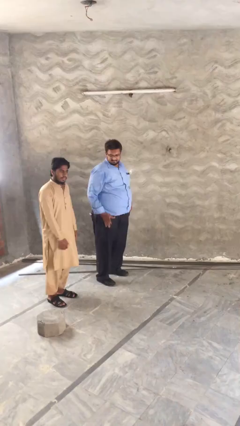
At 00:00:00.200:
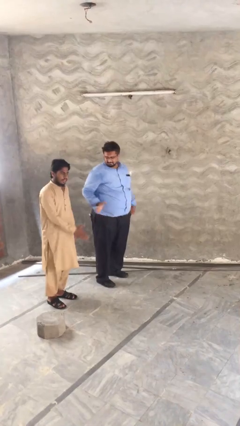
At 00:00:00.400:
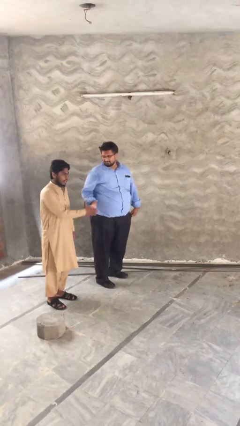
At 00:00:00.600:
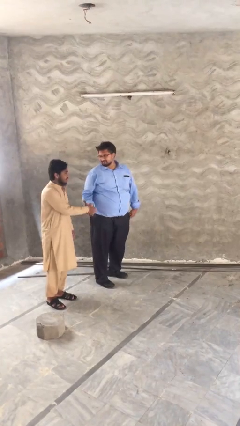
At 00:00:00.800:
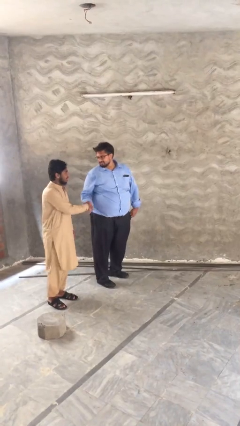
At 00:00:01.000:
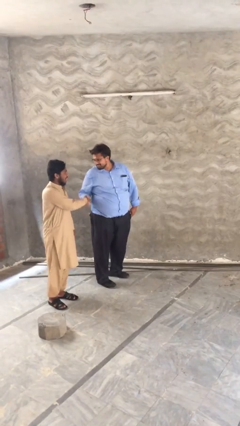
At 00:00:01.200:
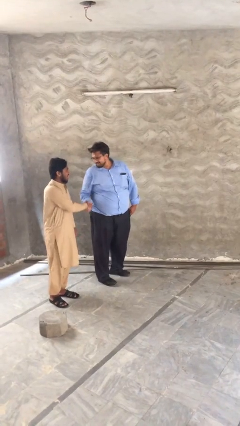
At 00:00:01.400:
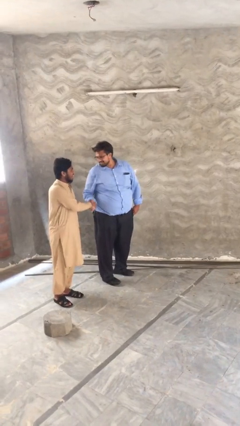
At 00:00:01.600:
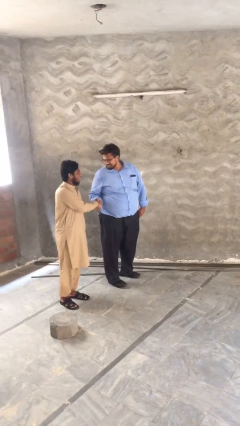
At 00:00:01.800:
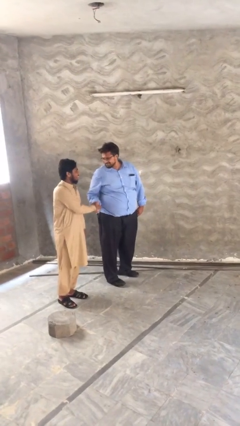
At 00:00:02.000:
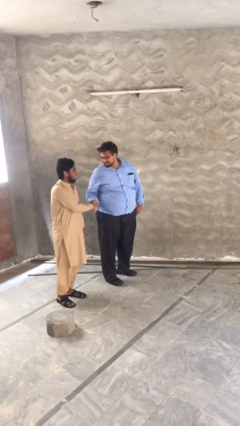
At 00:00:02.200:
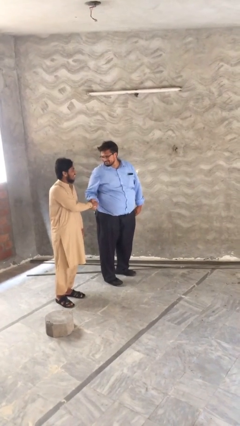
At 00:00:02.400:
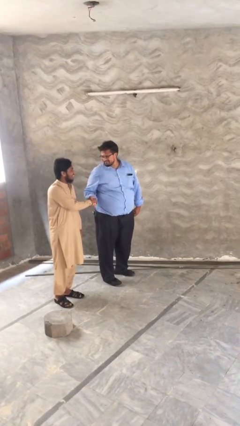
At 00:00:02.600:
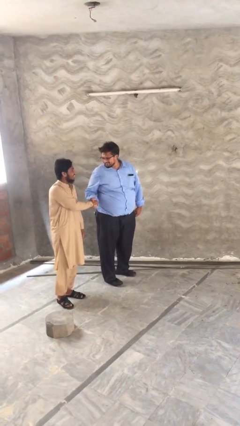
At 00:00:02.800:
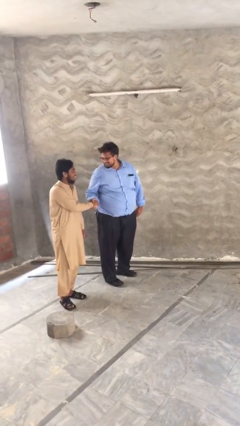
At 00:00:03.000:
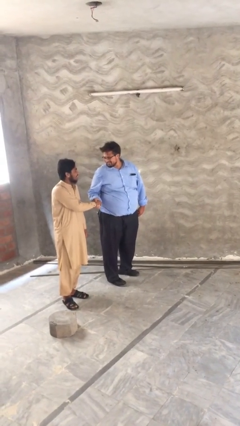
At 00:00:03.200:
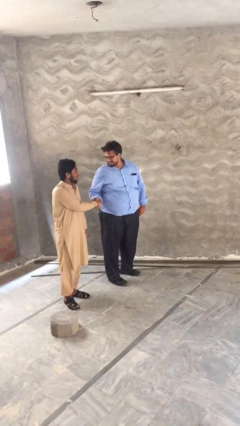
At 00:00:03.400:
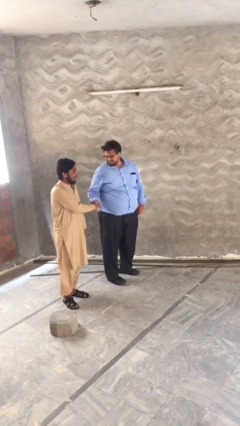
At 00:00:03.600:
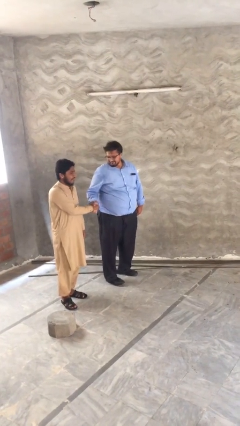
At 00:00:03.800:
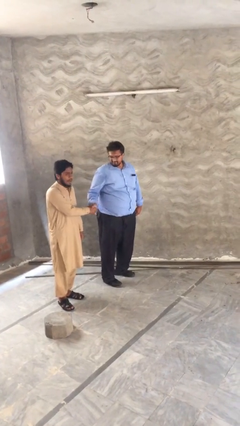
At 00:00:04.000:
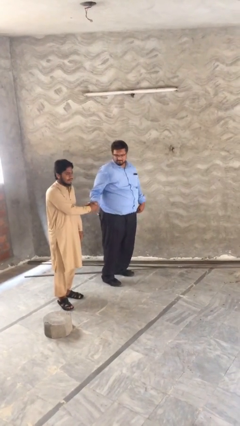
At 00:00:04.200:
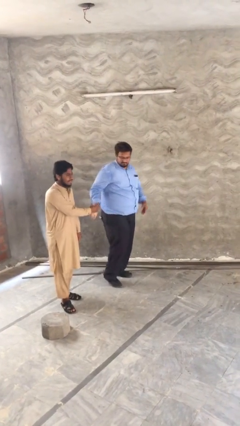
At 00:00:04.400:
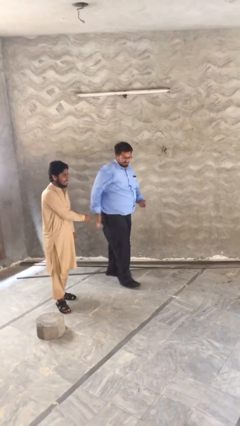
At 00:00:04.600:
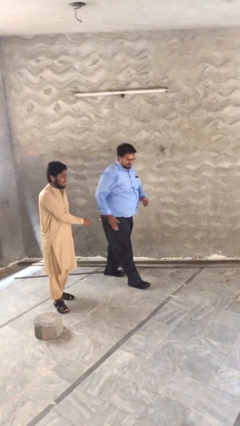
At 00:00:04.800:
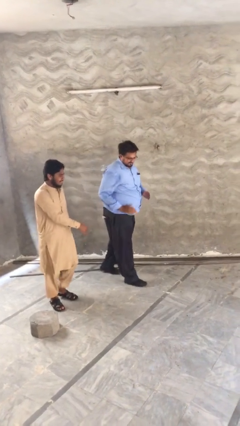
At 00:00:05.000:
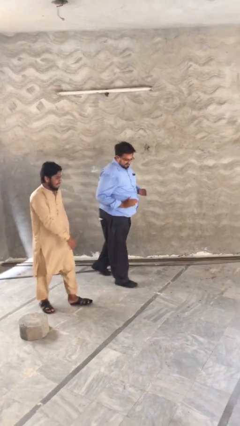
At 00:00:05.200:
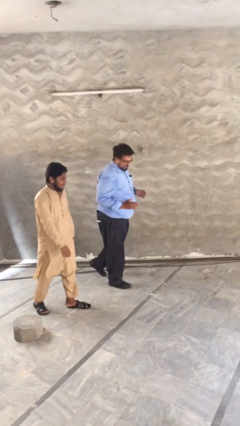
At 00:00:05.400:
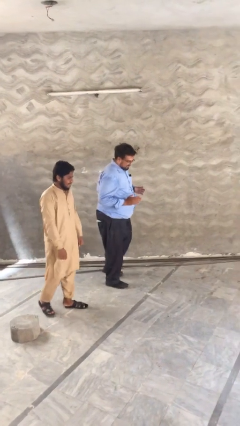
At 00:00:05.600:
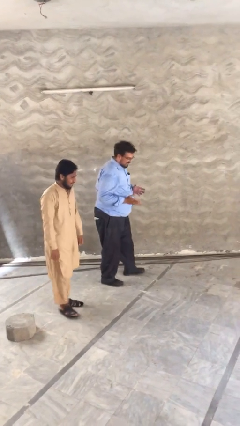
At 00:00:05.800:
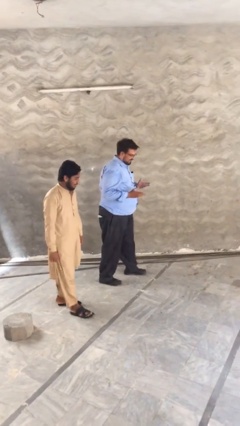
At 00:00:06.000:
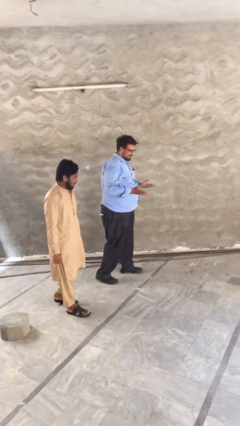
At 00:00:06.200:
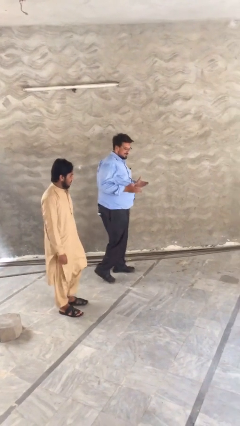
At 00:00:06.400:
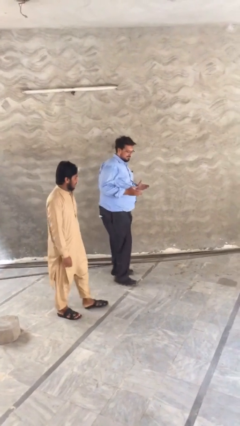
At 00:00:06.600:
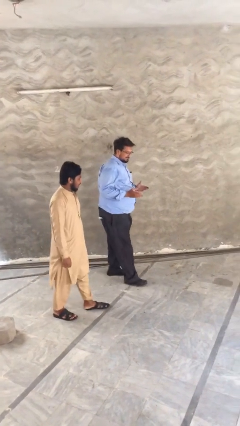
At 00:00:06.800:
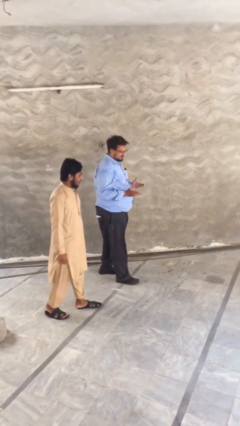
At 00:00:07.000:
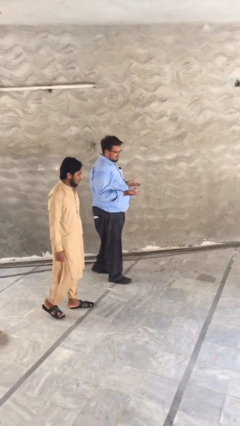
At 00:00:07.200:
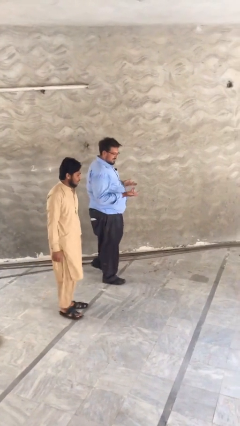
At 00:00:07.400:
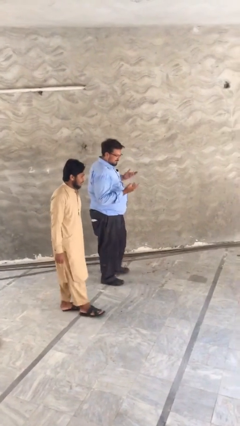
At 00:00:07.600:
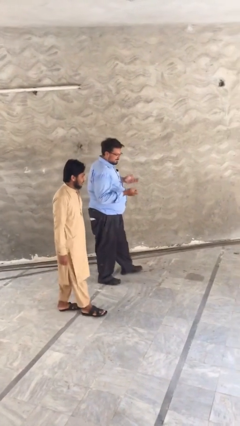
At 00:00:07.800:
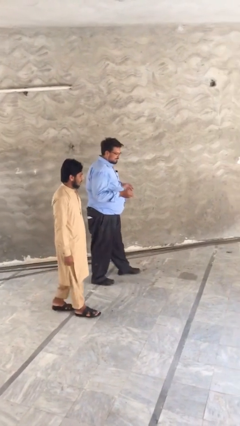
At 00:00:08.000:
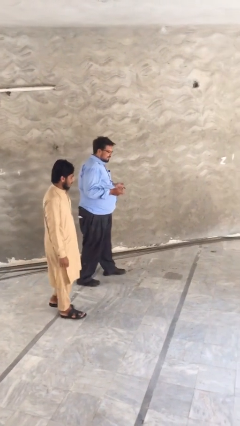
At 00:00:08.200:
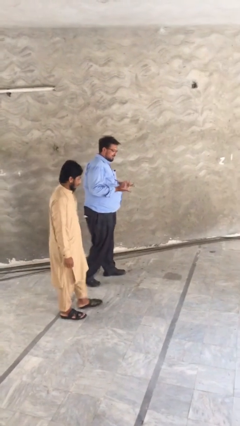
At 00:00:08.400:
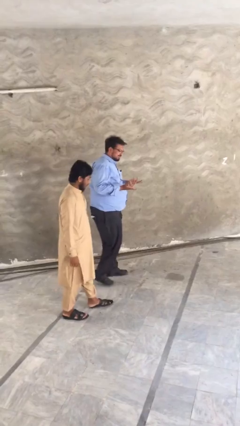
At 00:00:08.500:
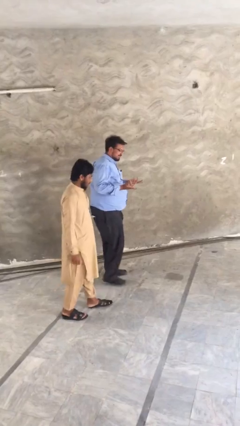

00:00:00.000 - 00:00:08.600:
person shakes hand

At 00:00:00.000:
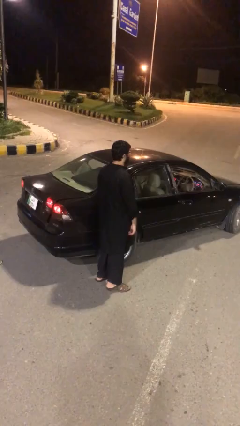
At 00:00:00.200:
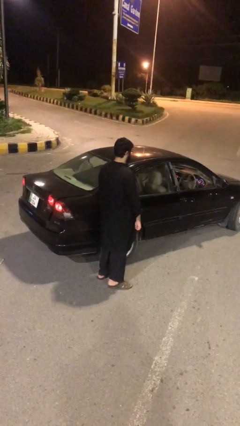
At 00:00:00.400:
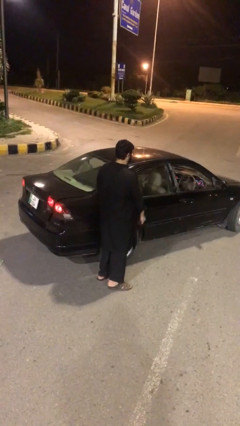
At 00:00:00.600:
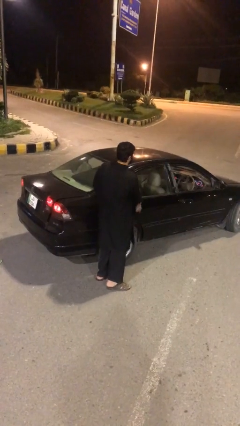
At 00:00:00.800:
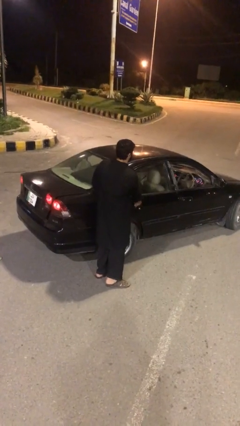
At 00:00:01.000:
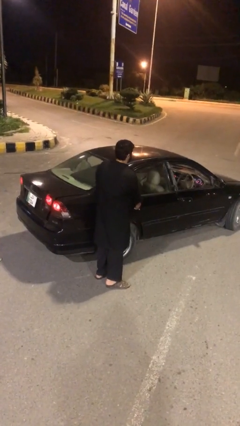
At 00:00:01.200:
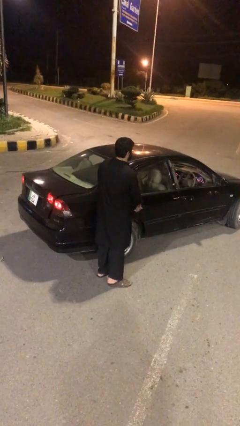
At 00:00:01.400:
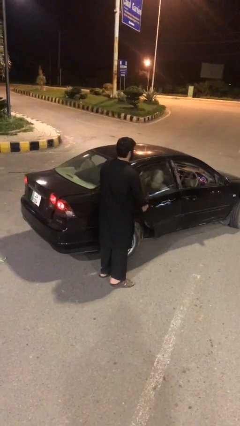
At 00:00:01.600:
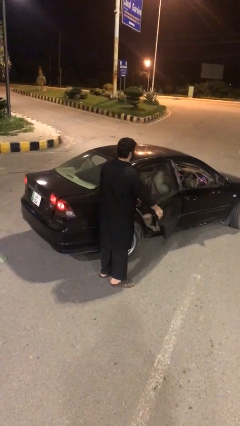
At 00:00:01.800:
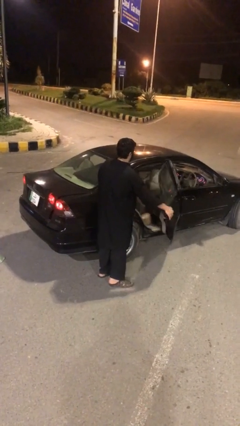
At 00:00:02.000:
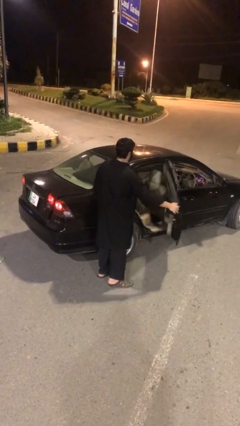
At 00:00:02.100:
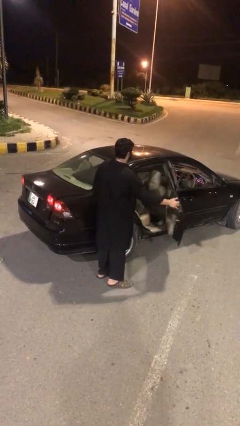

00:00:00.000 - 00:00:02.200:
person opens car door

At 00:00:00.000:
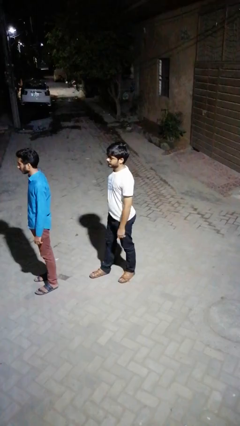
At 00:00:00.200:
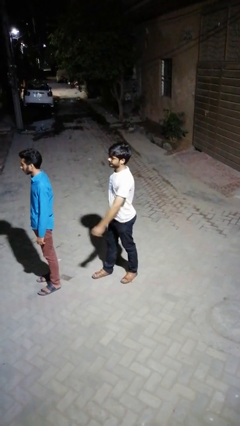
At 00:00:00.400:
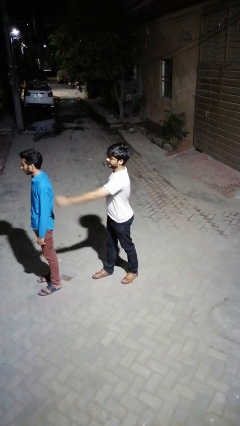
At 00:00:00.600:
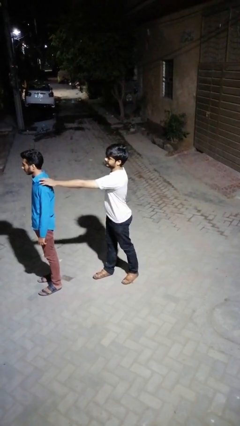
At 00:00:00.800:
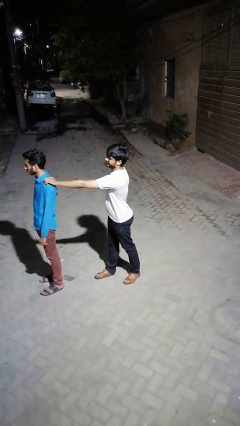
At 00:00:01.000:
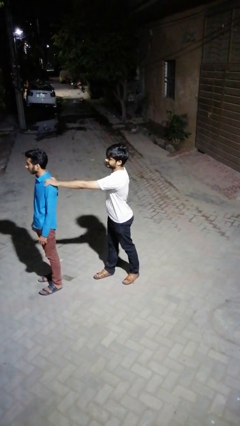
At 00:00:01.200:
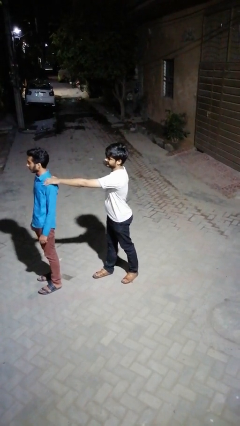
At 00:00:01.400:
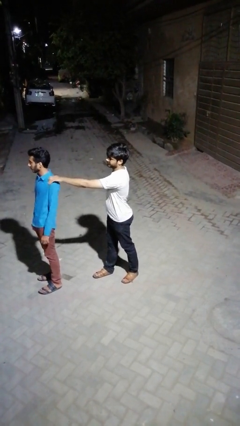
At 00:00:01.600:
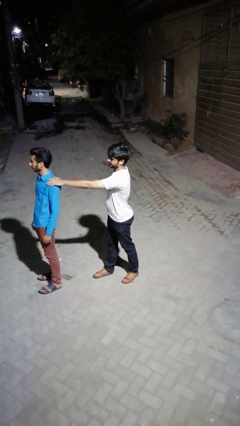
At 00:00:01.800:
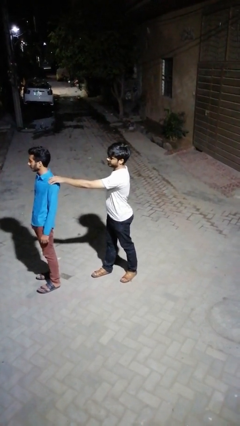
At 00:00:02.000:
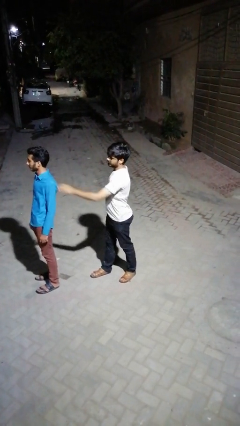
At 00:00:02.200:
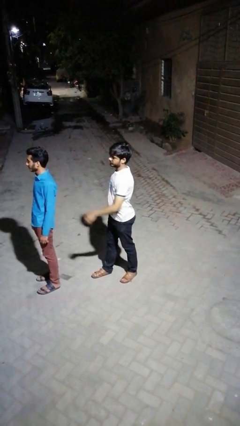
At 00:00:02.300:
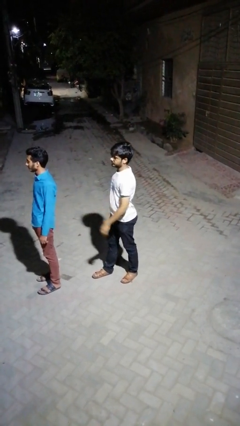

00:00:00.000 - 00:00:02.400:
person touches back of person

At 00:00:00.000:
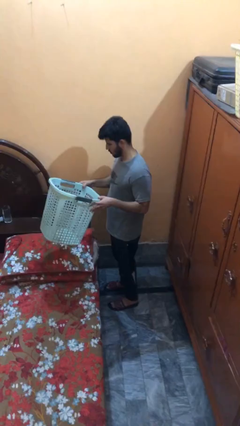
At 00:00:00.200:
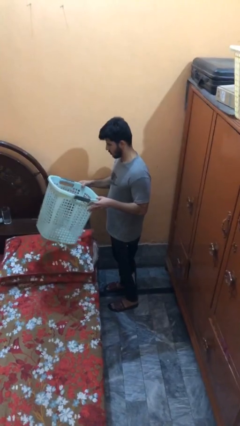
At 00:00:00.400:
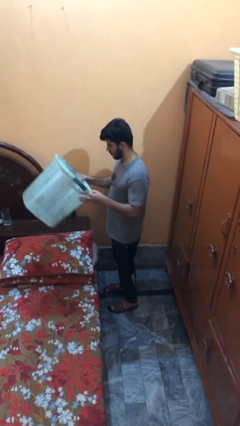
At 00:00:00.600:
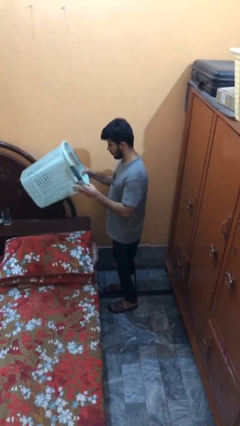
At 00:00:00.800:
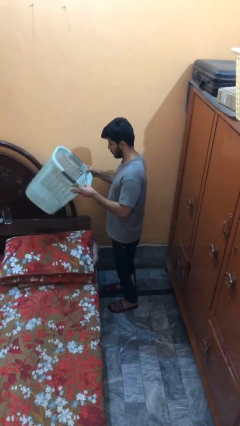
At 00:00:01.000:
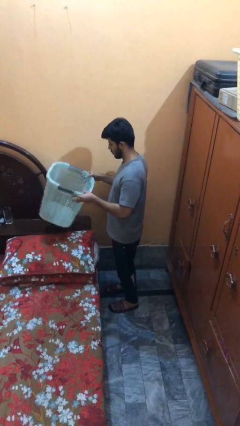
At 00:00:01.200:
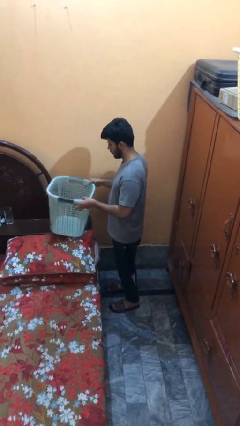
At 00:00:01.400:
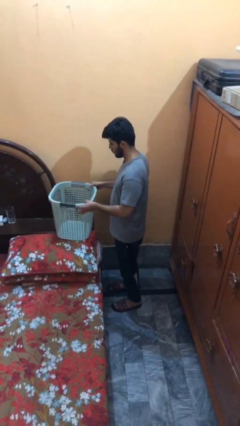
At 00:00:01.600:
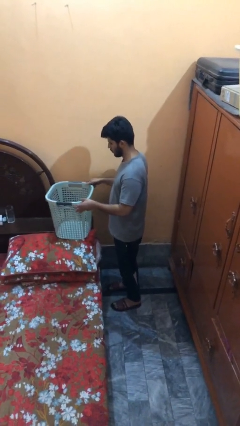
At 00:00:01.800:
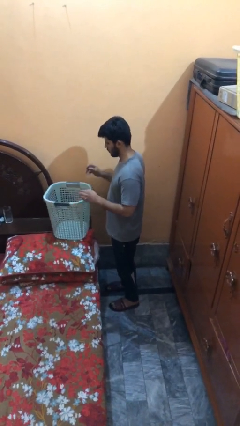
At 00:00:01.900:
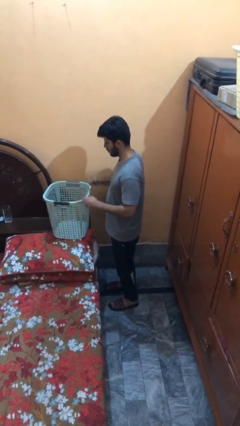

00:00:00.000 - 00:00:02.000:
person puts down object on bed

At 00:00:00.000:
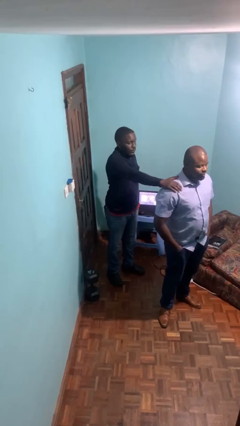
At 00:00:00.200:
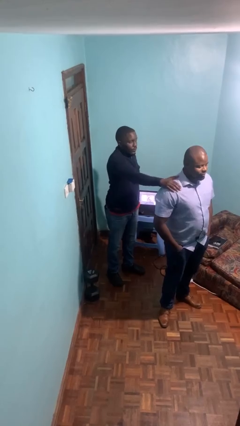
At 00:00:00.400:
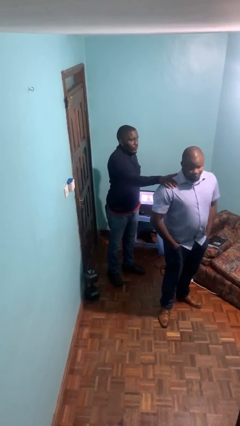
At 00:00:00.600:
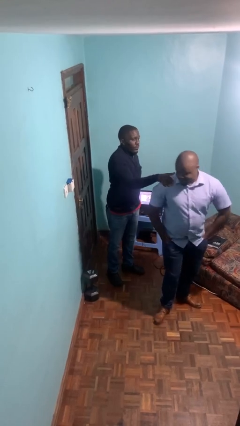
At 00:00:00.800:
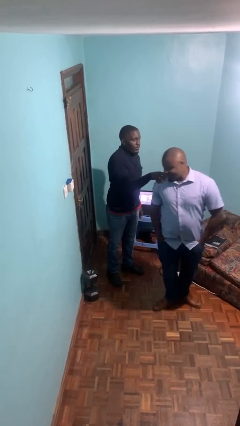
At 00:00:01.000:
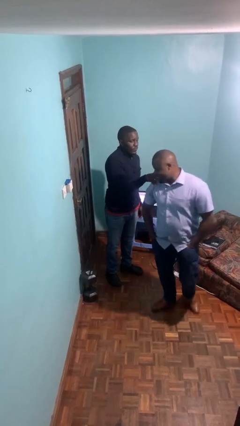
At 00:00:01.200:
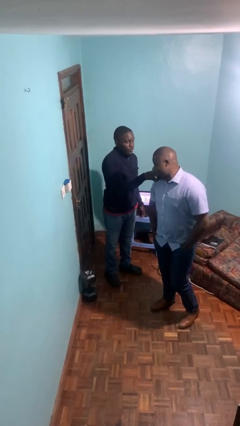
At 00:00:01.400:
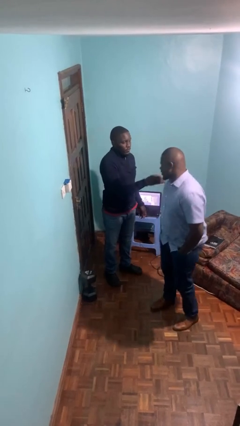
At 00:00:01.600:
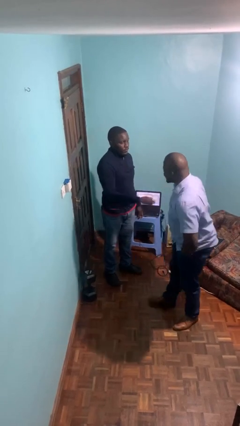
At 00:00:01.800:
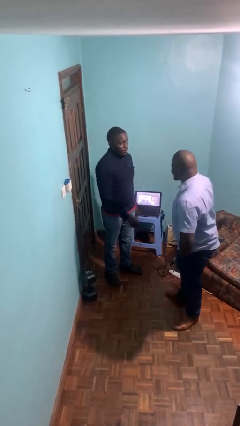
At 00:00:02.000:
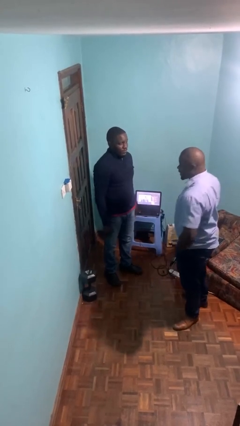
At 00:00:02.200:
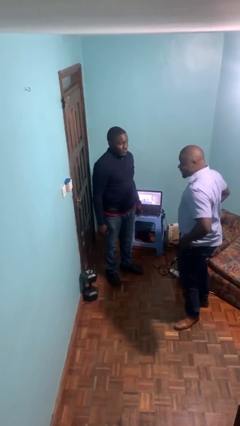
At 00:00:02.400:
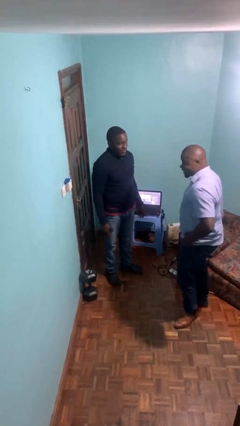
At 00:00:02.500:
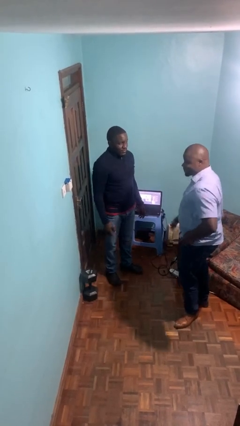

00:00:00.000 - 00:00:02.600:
person spins person around
